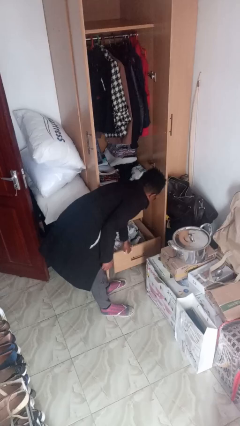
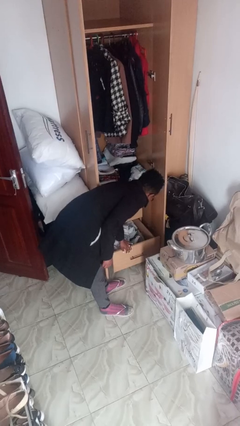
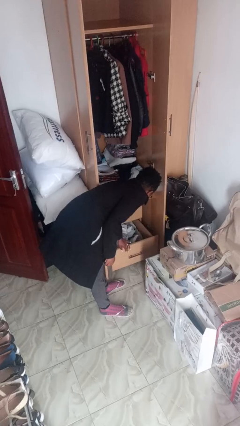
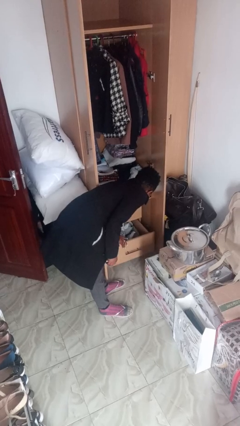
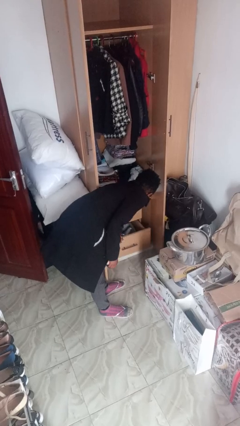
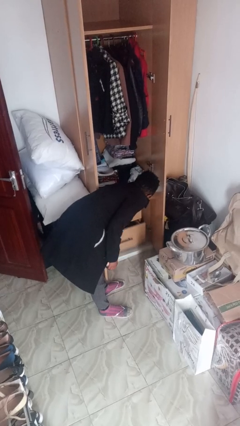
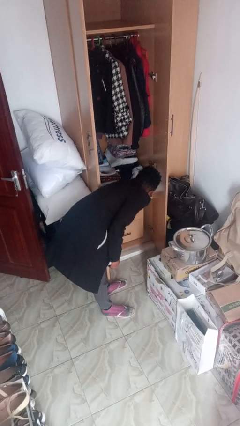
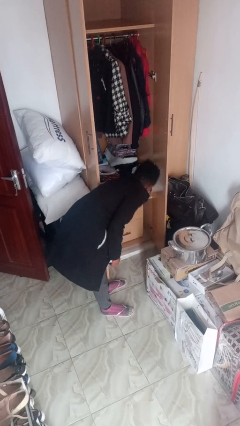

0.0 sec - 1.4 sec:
person closes dresser drawer

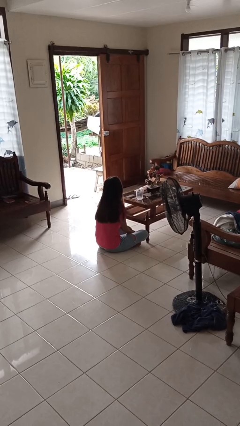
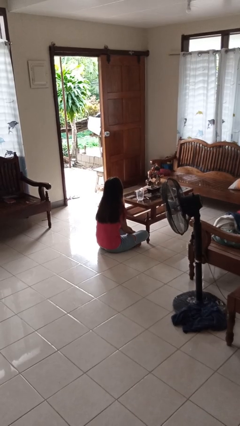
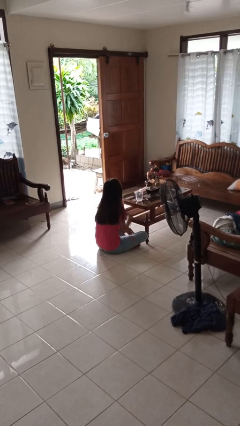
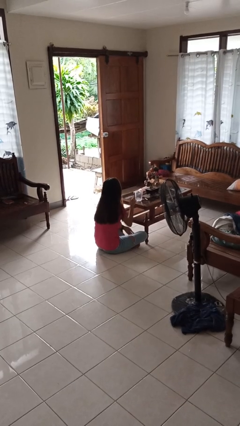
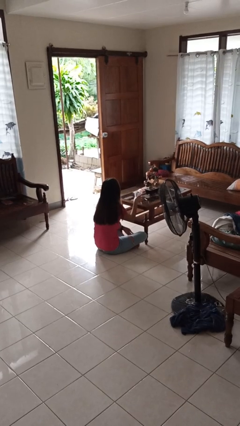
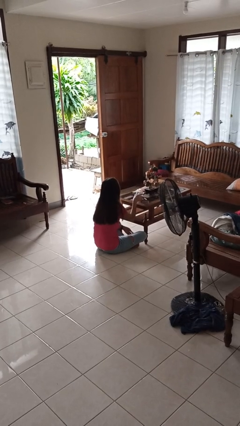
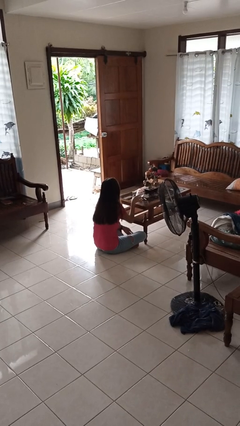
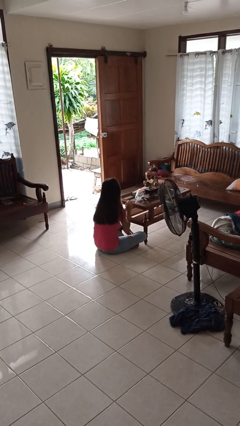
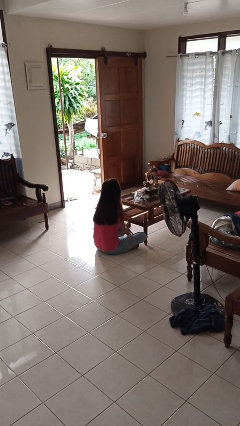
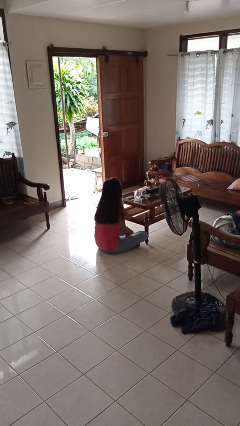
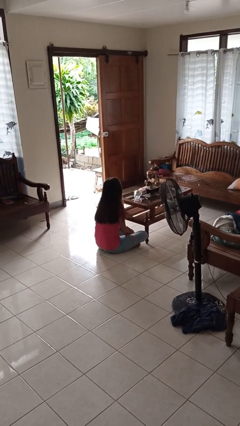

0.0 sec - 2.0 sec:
person knocks over glass

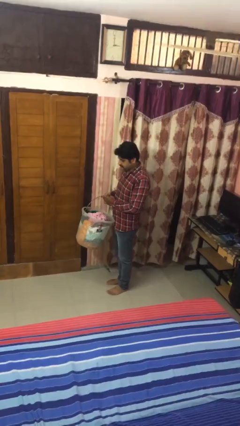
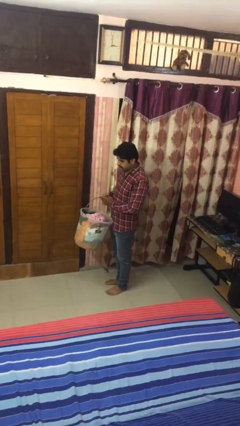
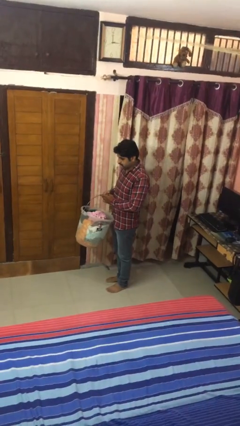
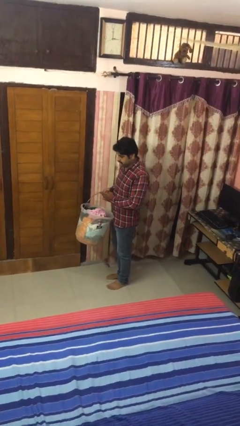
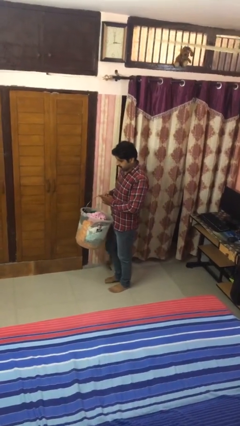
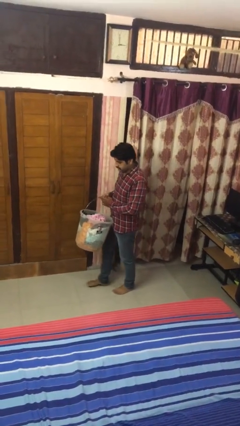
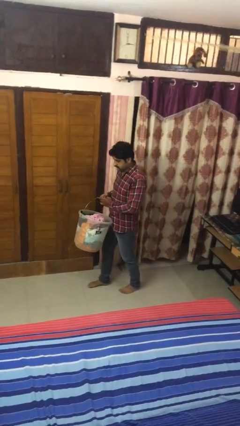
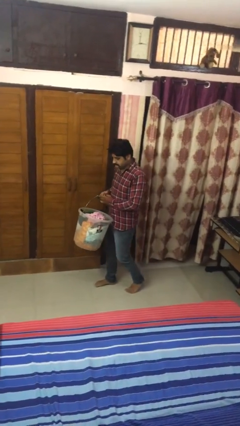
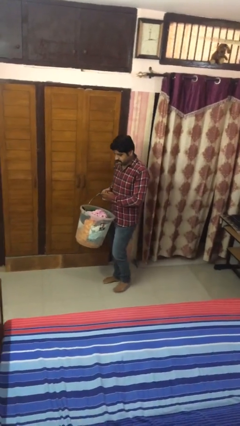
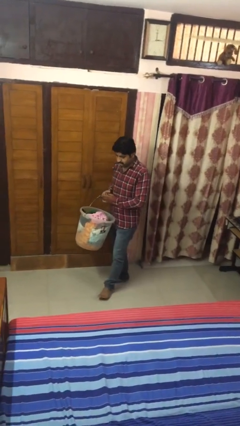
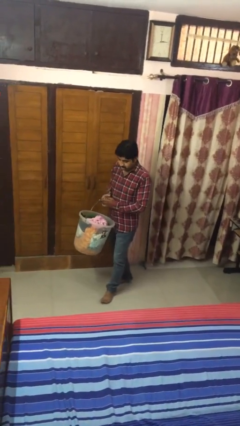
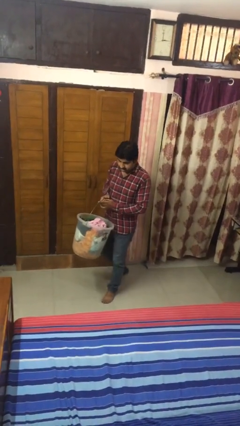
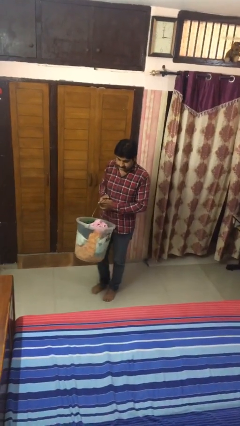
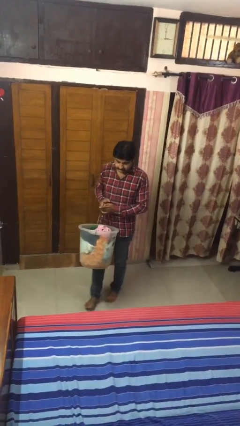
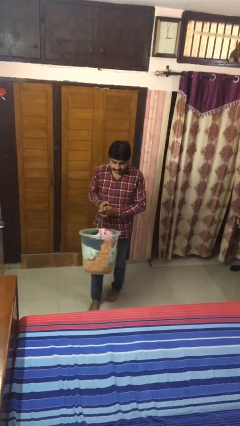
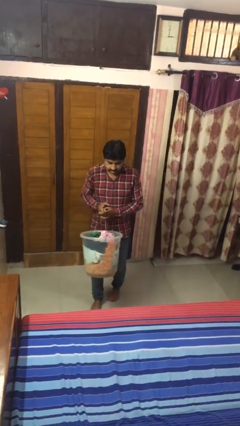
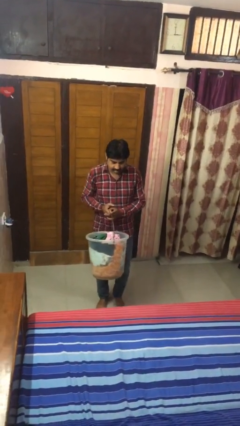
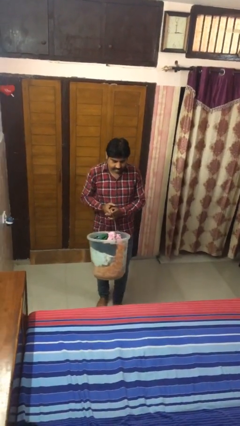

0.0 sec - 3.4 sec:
person carries laundry basket

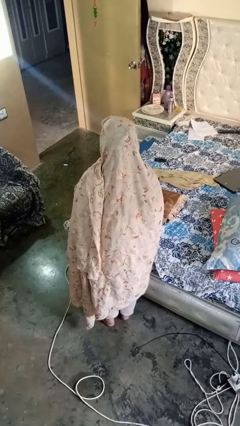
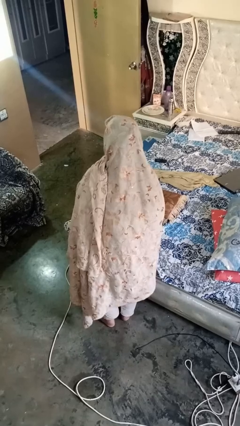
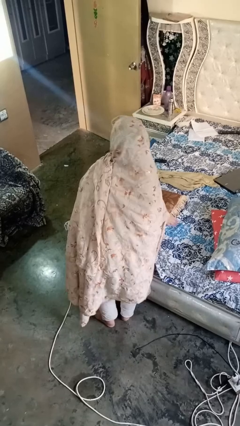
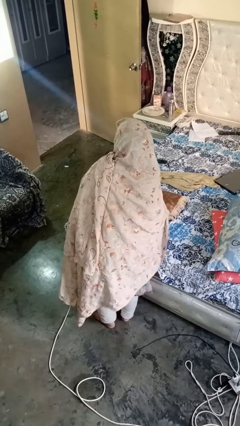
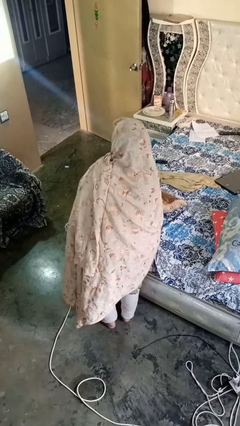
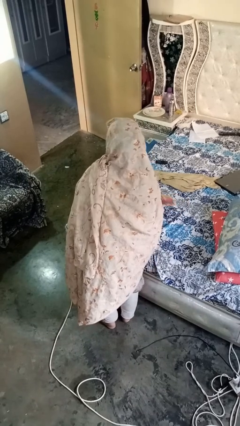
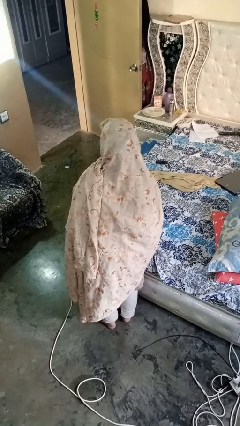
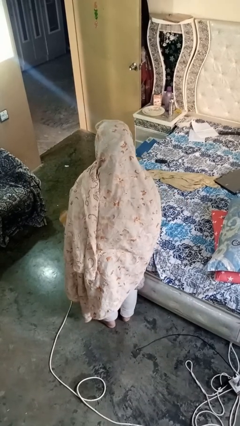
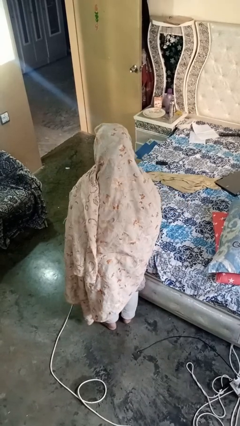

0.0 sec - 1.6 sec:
person picks up object from bed

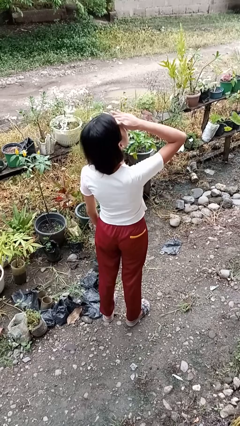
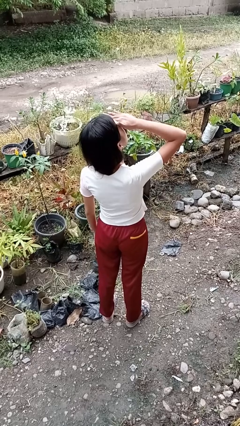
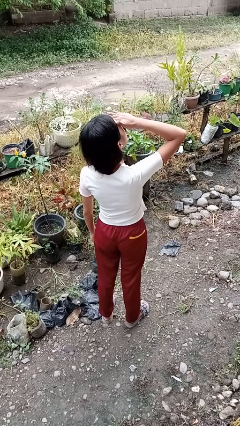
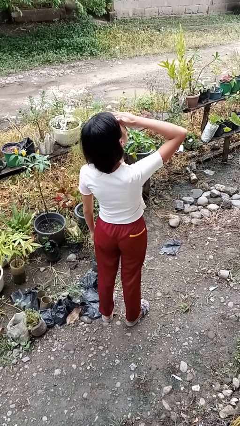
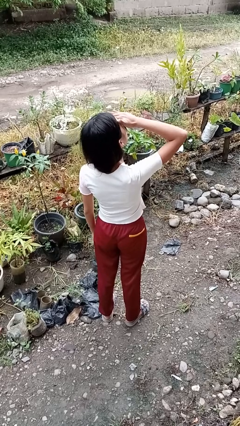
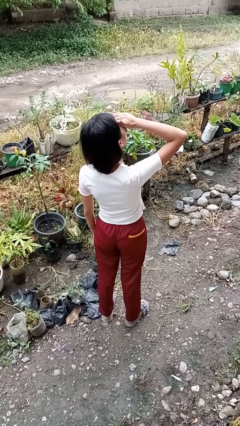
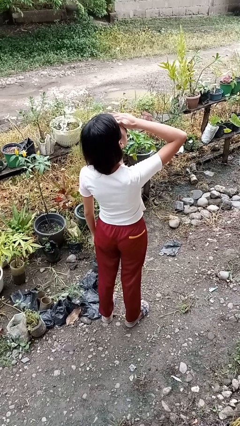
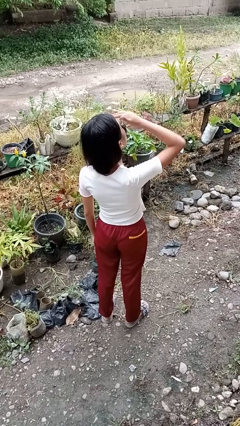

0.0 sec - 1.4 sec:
person shades eyes

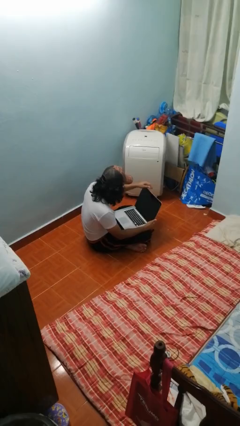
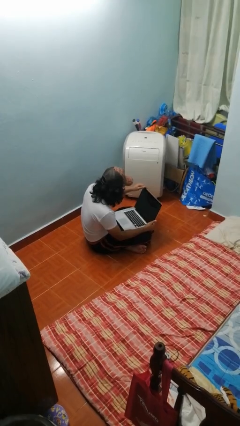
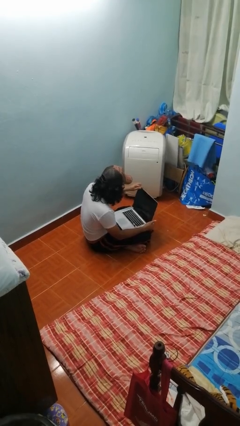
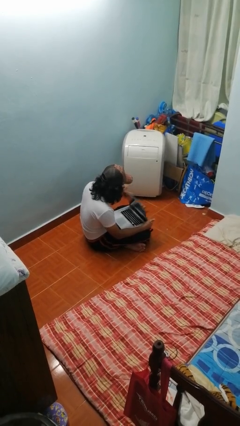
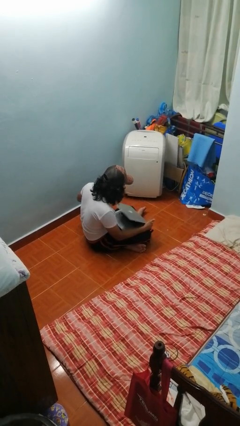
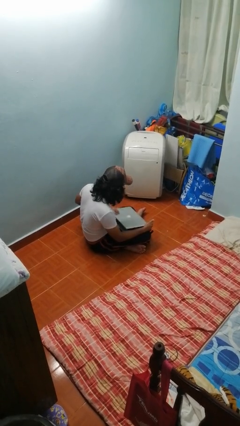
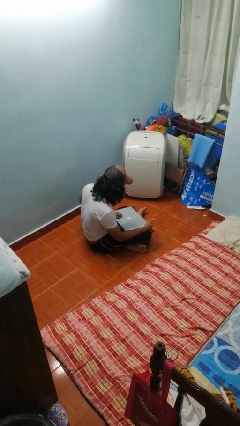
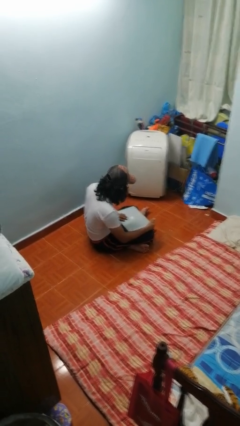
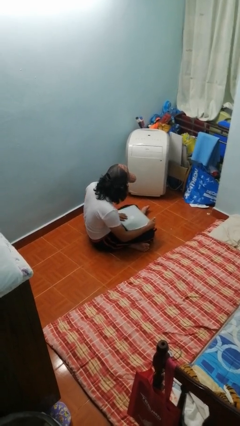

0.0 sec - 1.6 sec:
person closes laptop

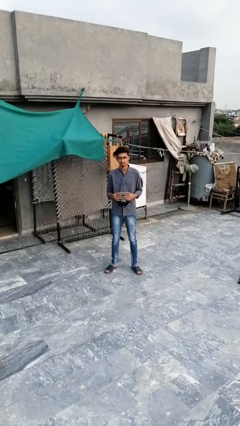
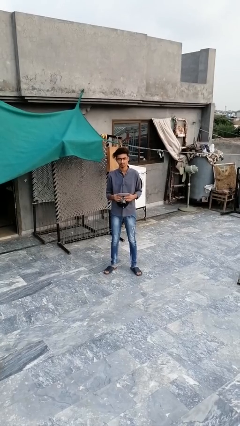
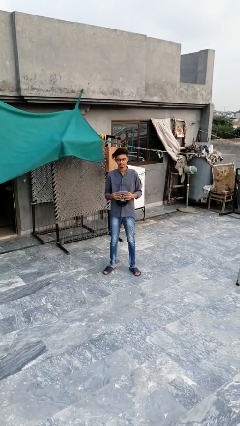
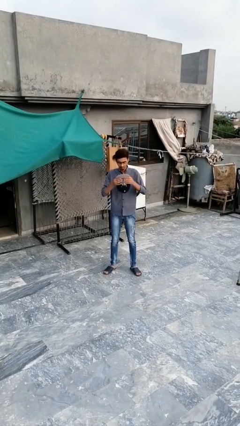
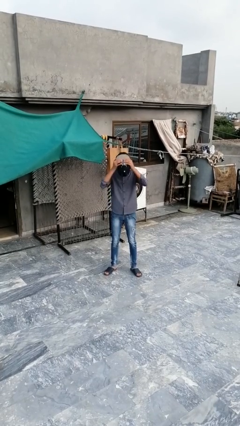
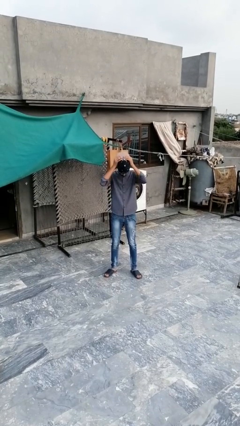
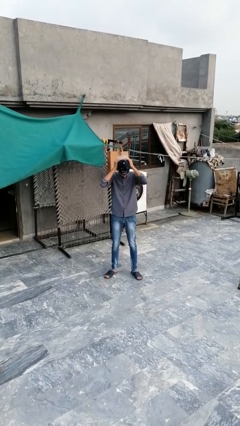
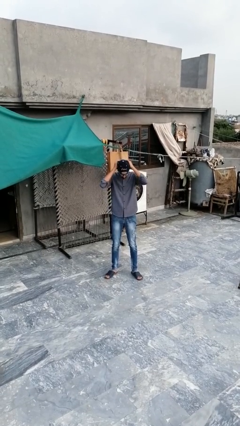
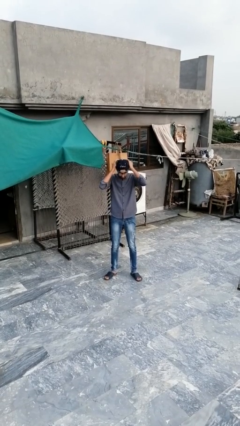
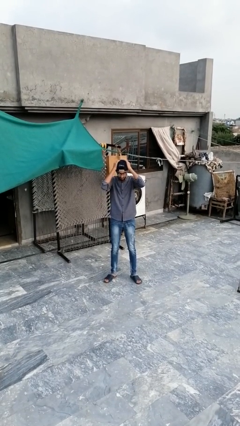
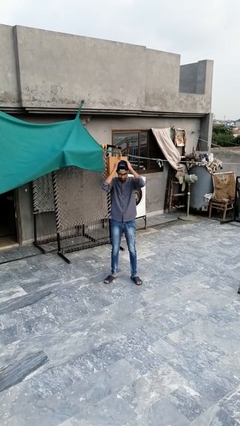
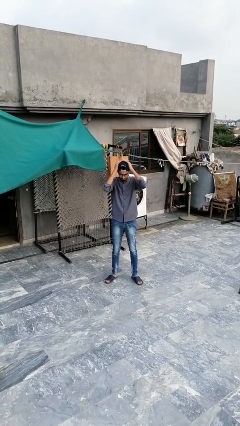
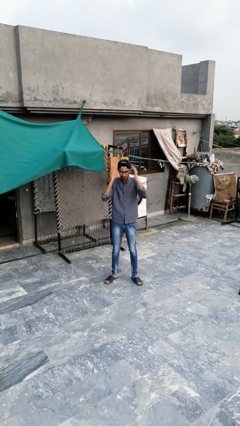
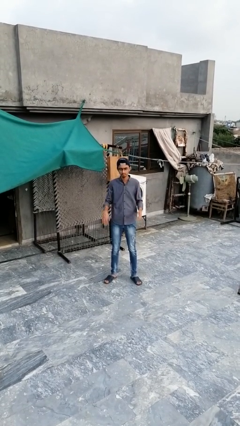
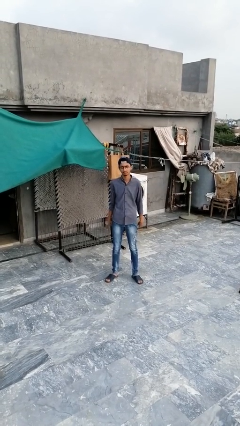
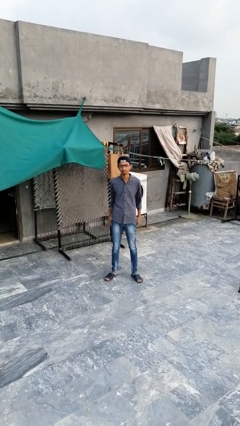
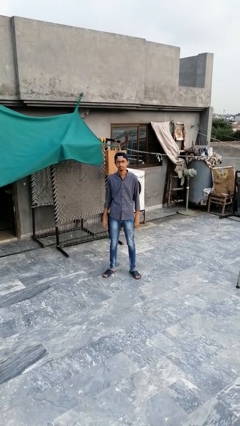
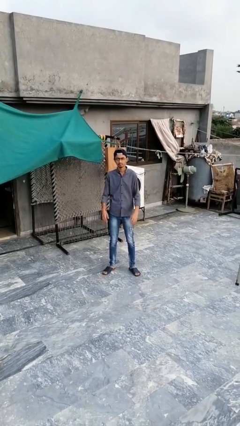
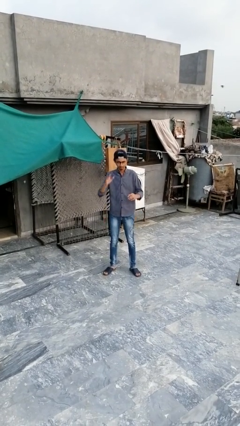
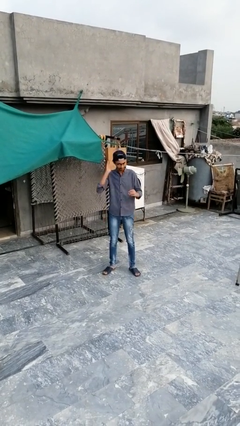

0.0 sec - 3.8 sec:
person puts on hat

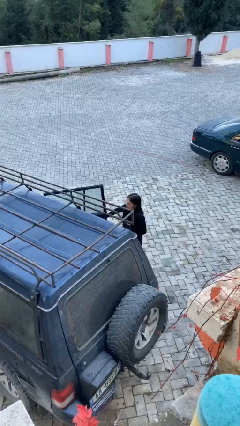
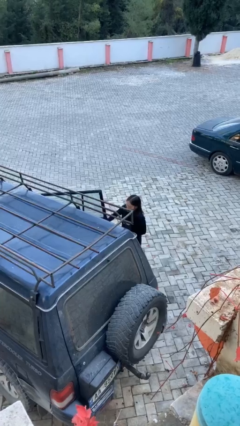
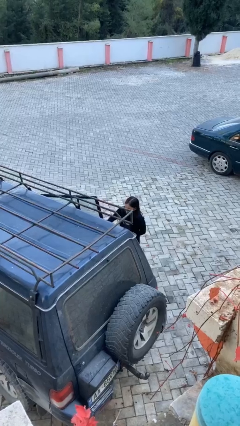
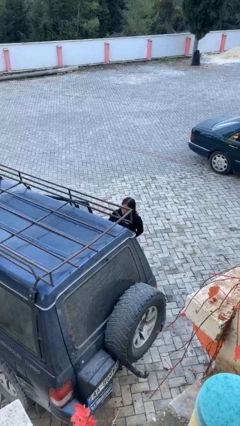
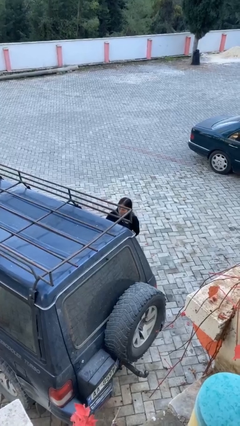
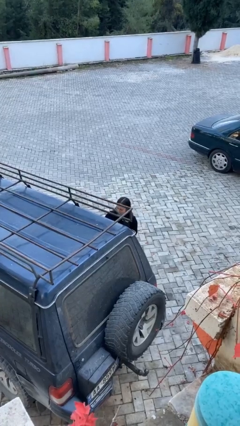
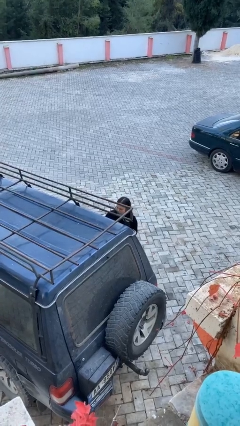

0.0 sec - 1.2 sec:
person closes car door

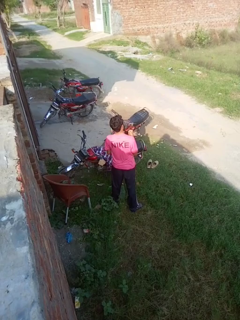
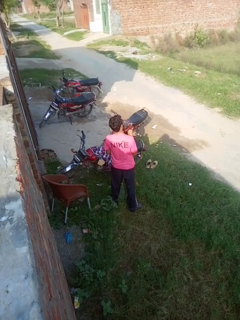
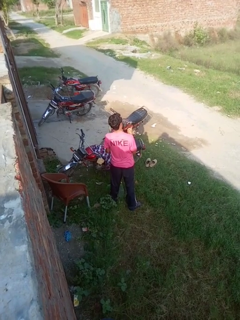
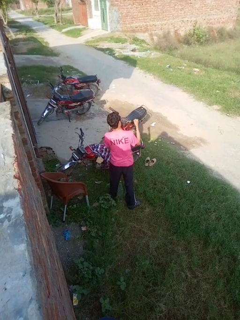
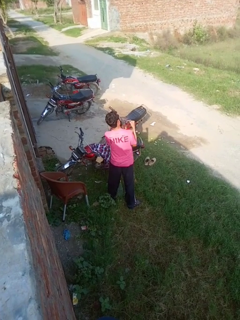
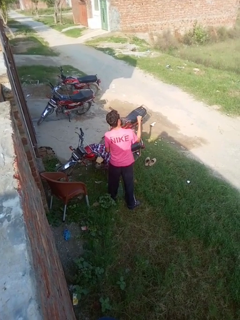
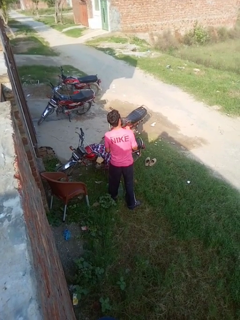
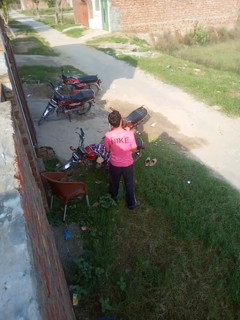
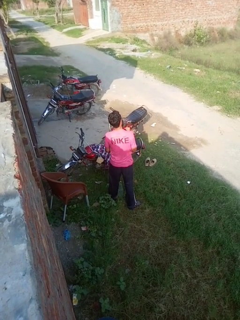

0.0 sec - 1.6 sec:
person punches
